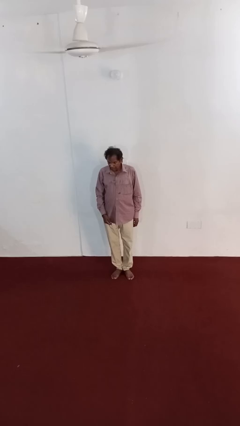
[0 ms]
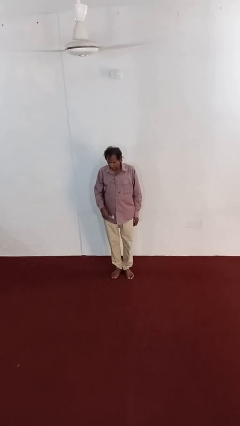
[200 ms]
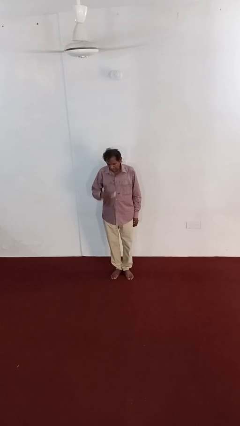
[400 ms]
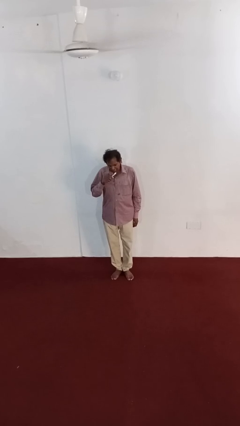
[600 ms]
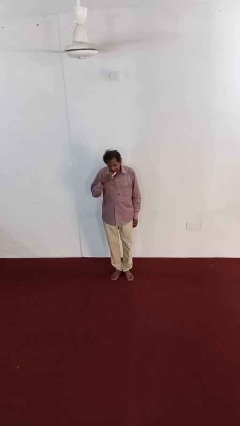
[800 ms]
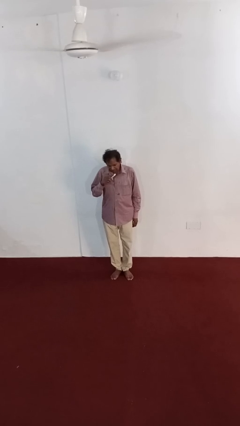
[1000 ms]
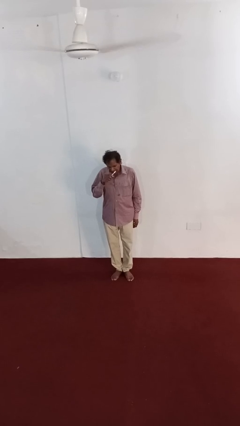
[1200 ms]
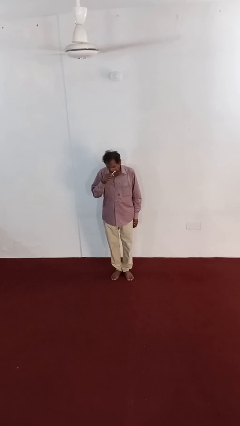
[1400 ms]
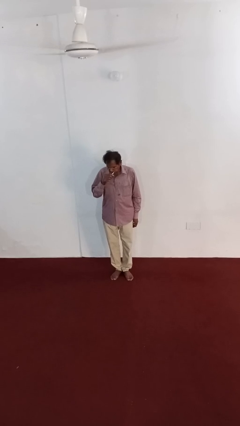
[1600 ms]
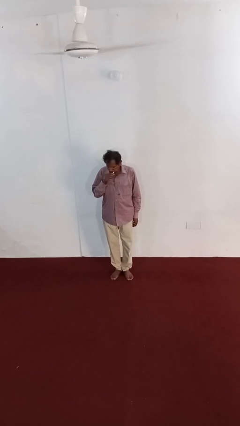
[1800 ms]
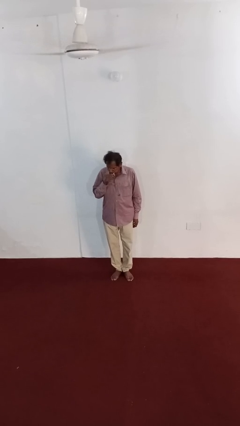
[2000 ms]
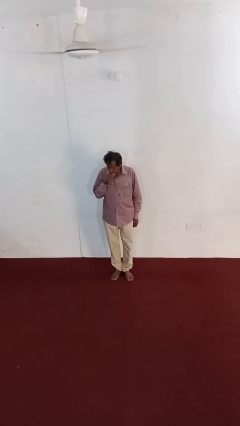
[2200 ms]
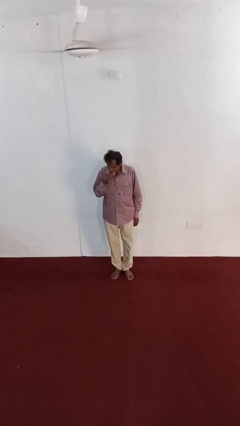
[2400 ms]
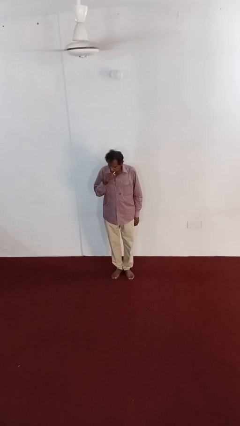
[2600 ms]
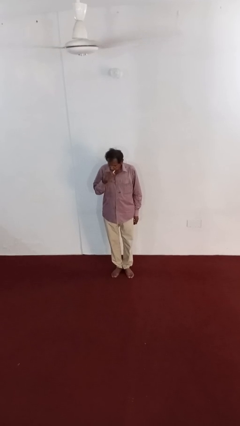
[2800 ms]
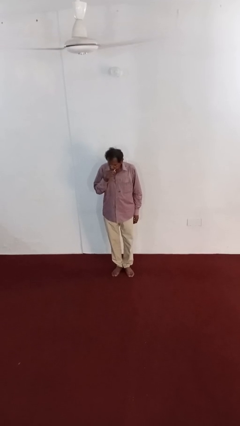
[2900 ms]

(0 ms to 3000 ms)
person brushes teeth

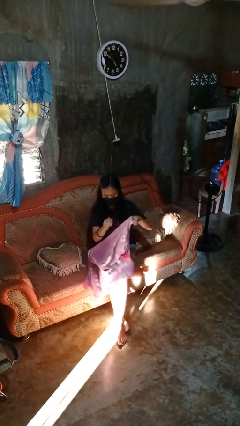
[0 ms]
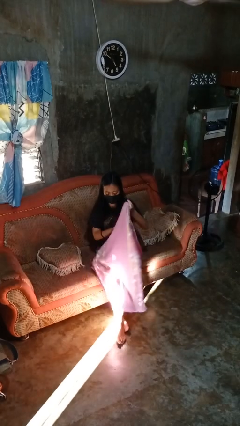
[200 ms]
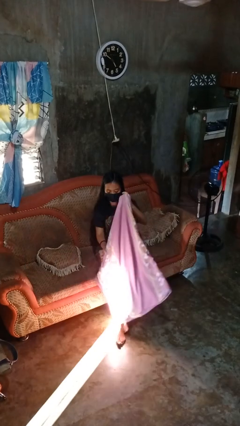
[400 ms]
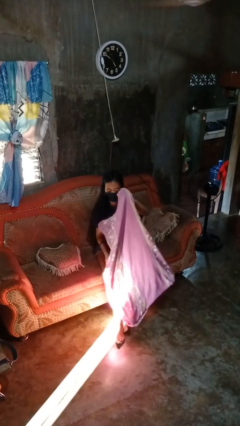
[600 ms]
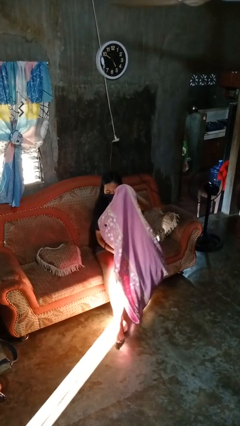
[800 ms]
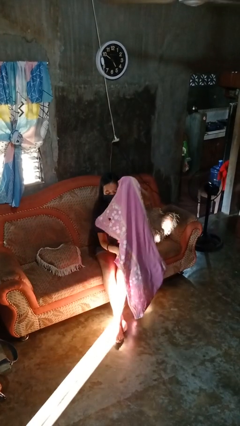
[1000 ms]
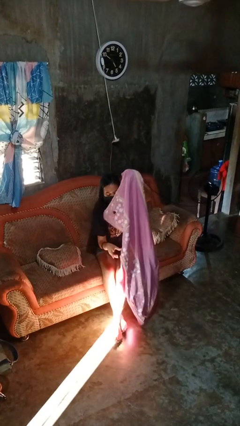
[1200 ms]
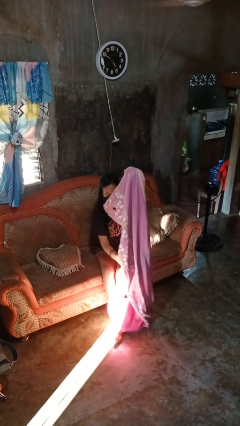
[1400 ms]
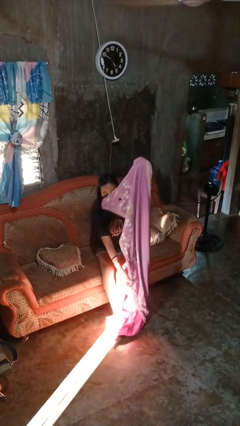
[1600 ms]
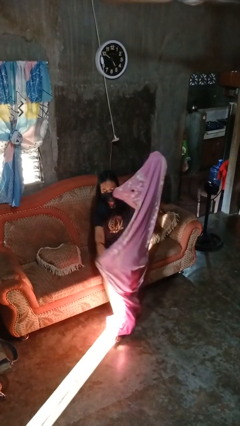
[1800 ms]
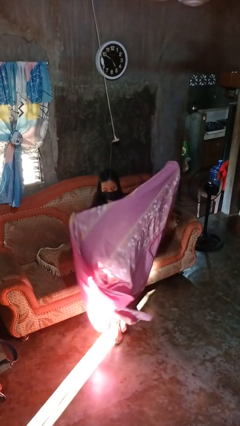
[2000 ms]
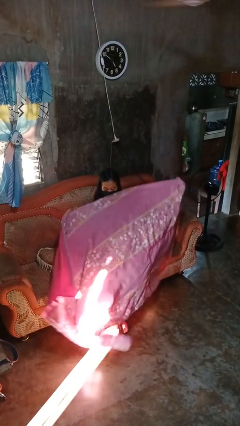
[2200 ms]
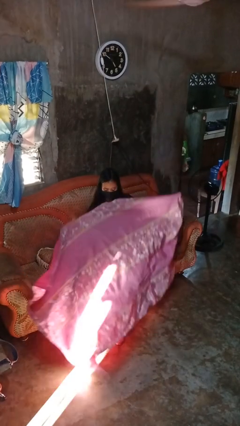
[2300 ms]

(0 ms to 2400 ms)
person unfolds blanket

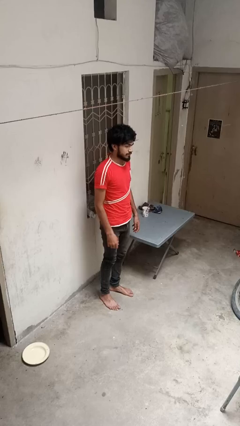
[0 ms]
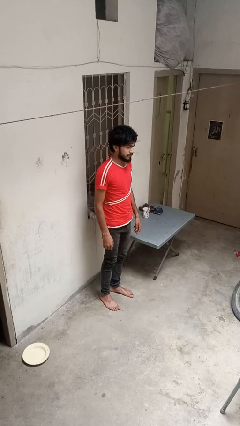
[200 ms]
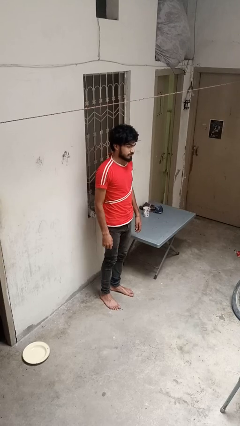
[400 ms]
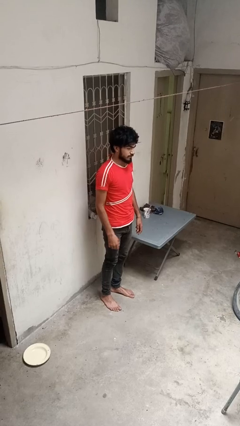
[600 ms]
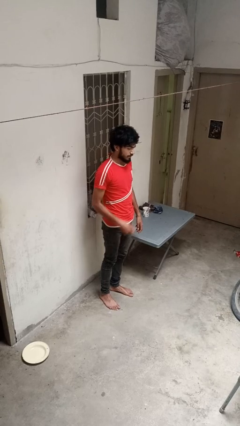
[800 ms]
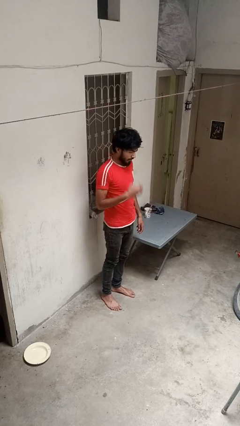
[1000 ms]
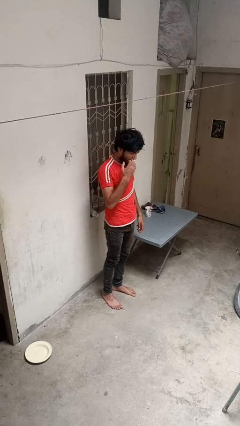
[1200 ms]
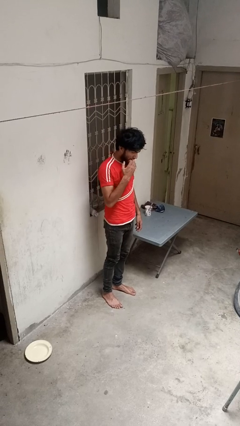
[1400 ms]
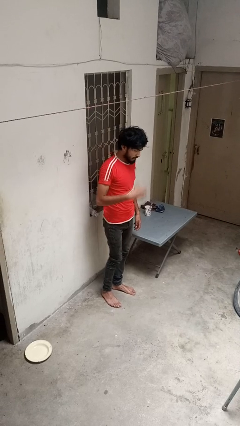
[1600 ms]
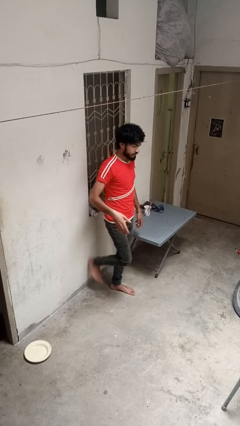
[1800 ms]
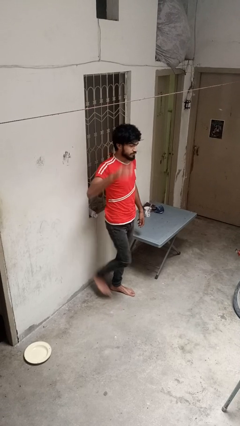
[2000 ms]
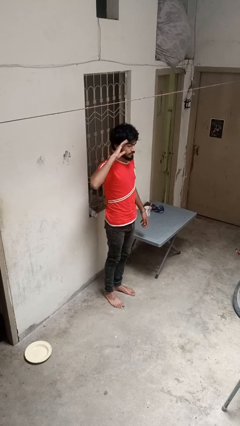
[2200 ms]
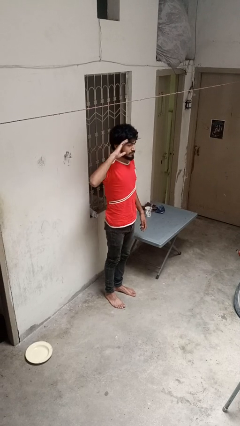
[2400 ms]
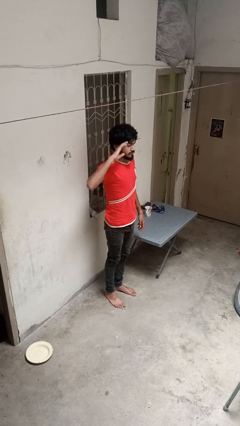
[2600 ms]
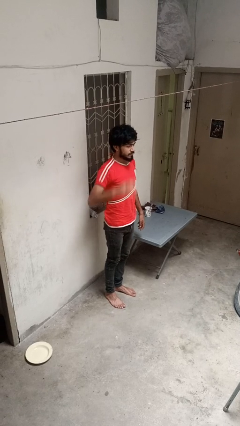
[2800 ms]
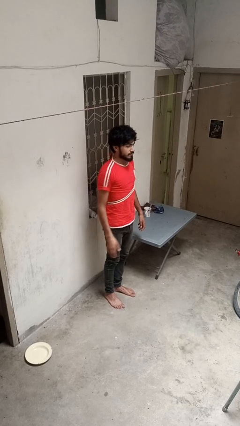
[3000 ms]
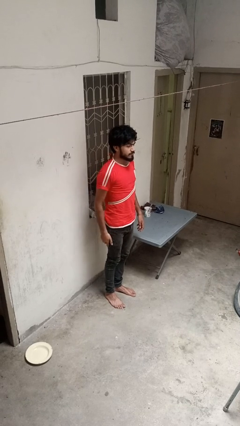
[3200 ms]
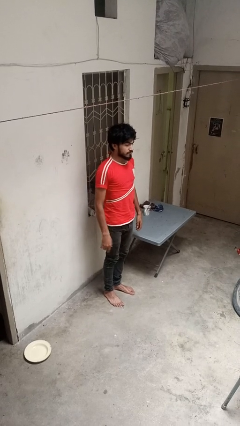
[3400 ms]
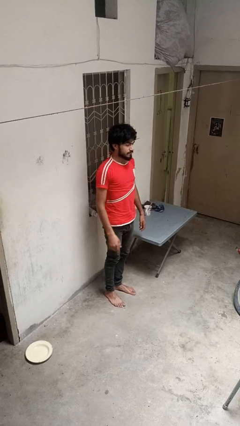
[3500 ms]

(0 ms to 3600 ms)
person salutes

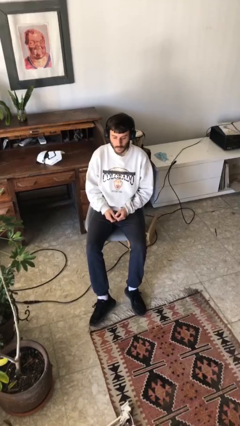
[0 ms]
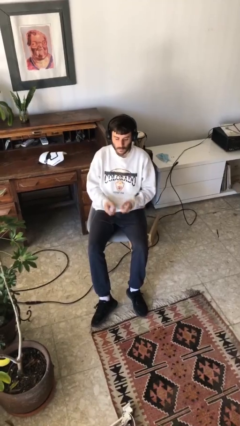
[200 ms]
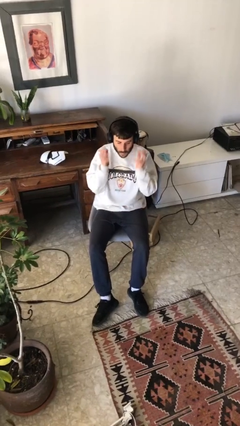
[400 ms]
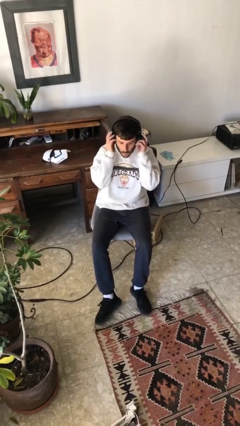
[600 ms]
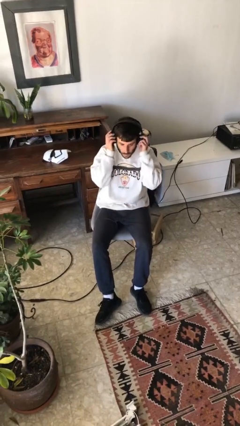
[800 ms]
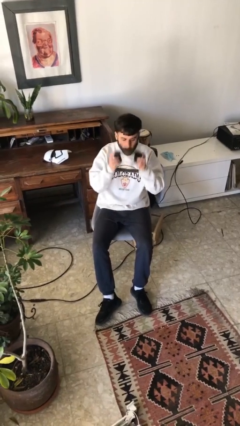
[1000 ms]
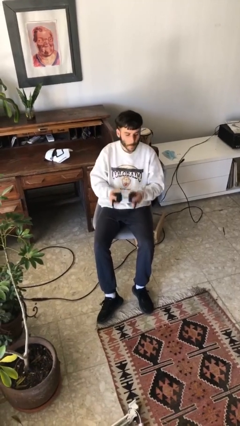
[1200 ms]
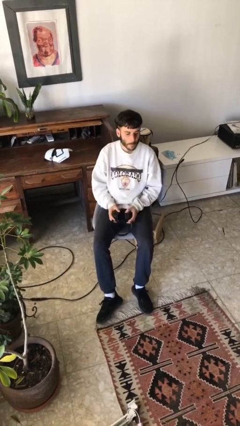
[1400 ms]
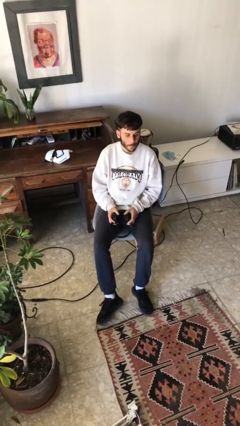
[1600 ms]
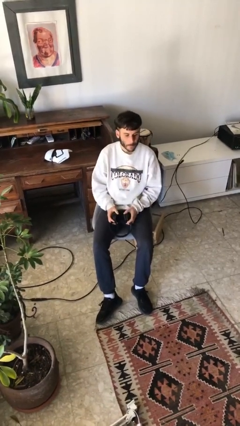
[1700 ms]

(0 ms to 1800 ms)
person takes off headphones

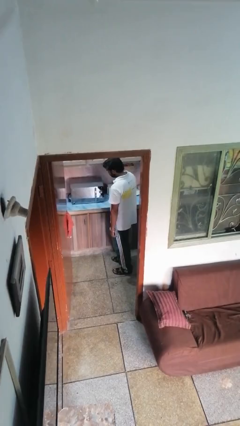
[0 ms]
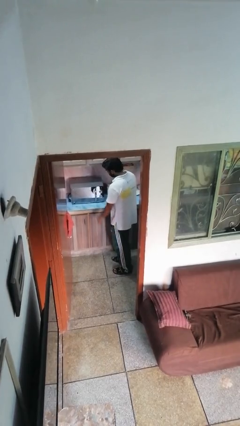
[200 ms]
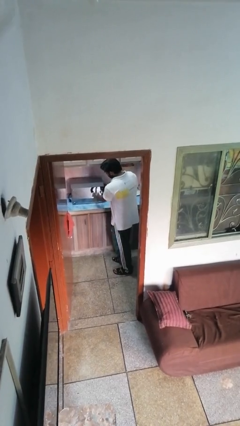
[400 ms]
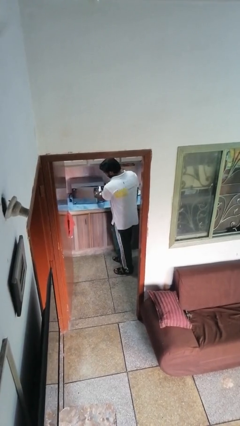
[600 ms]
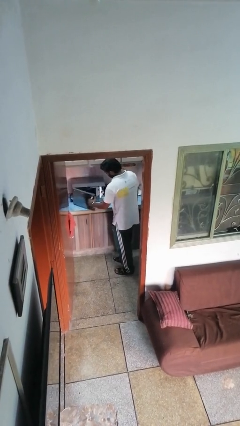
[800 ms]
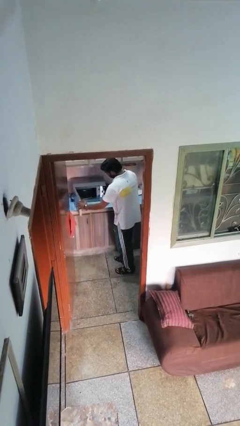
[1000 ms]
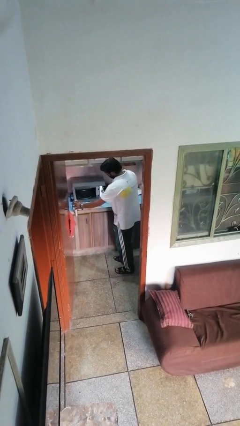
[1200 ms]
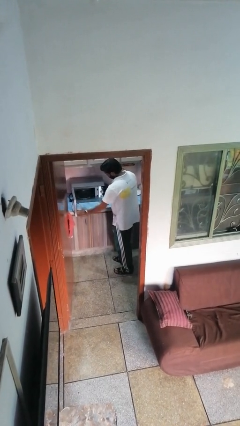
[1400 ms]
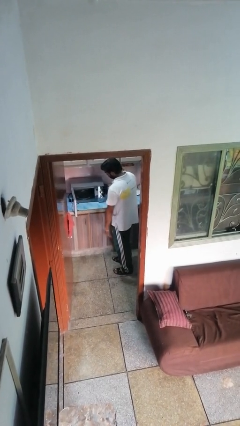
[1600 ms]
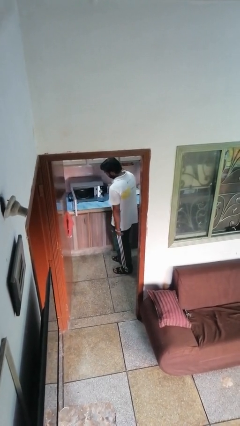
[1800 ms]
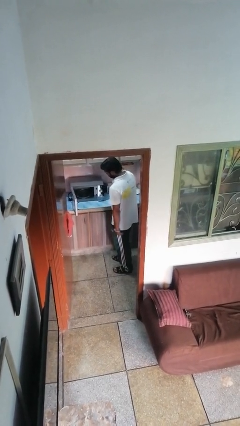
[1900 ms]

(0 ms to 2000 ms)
person opens microwave

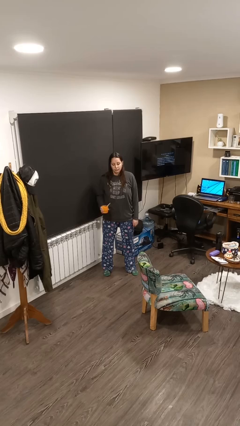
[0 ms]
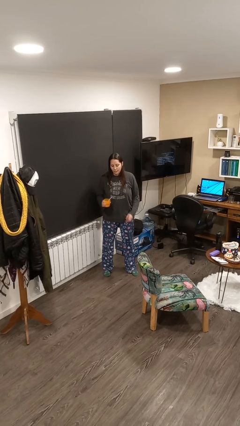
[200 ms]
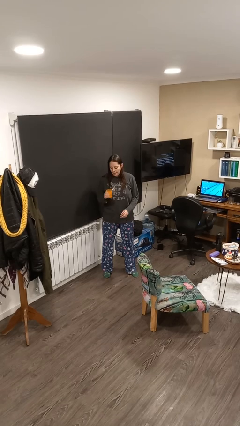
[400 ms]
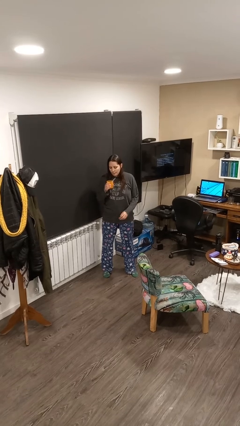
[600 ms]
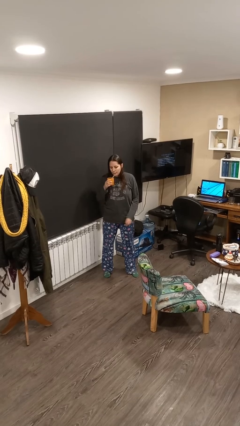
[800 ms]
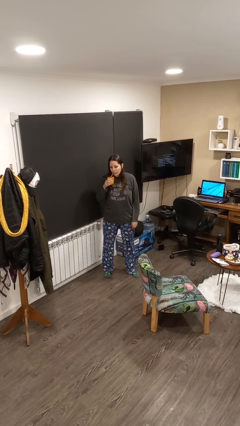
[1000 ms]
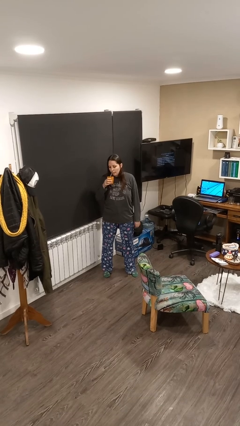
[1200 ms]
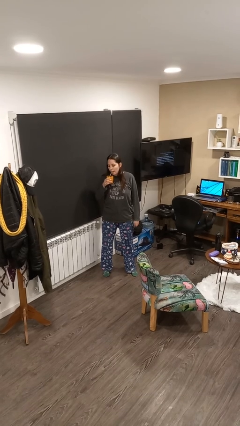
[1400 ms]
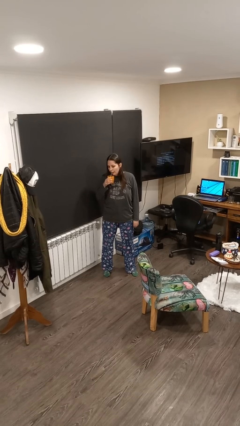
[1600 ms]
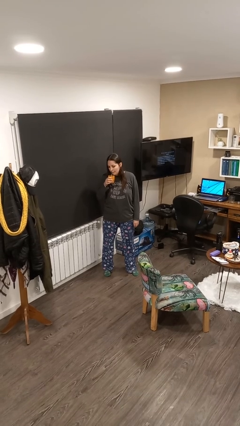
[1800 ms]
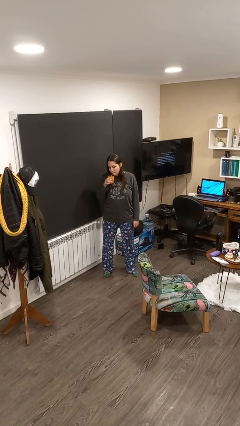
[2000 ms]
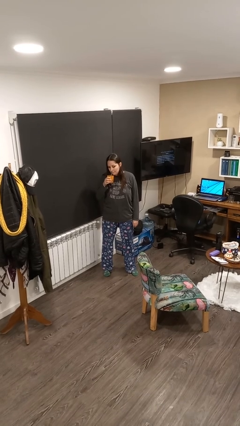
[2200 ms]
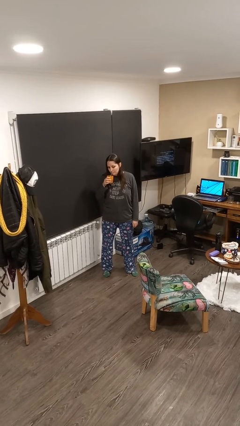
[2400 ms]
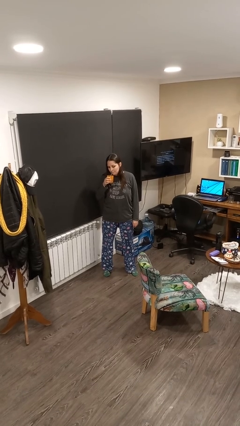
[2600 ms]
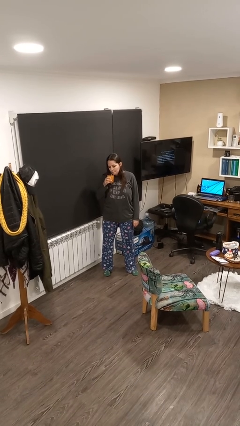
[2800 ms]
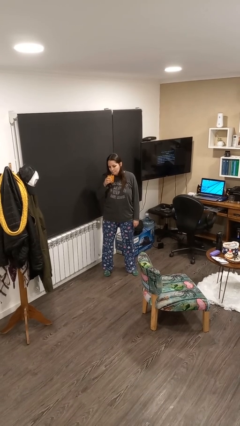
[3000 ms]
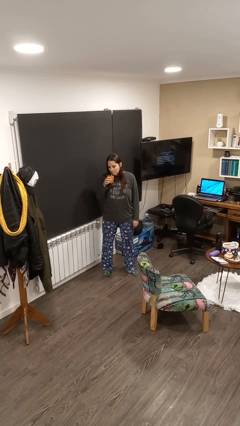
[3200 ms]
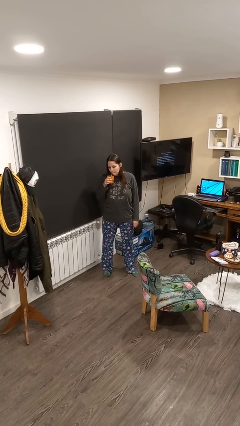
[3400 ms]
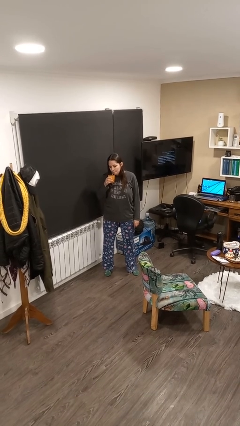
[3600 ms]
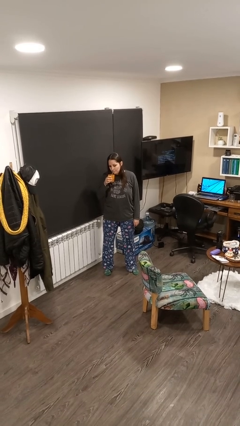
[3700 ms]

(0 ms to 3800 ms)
person drinks from straw

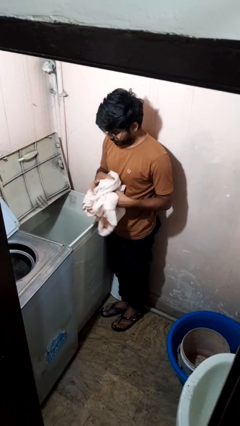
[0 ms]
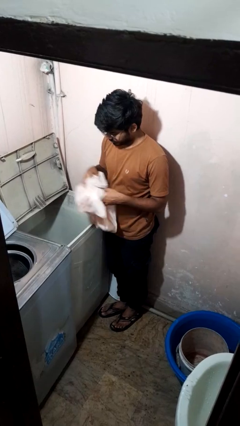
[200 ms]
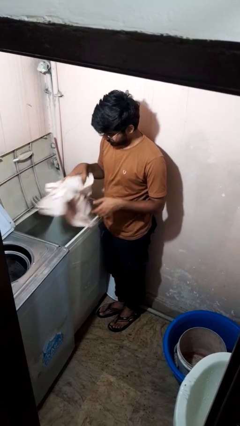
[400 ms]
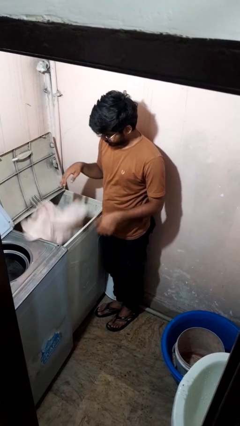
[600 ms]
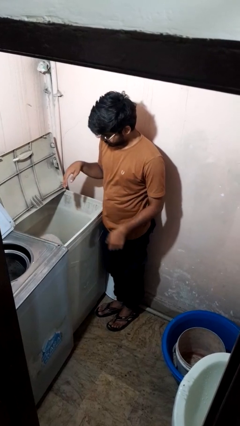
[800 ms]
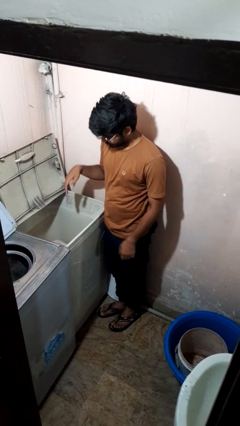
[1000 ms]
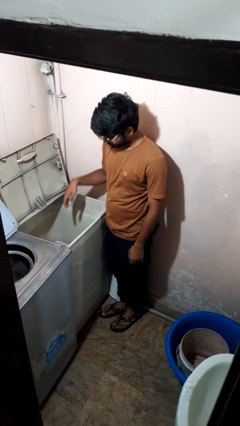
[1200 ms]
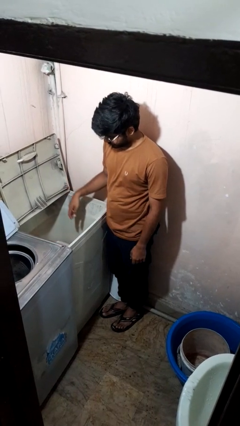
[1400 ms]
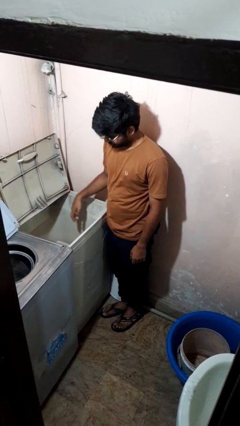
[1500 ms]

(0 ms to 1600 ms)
person loads clotheswasher
